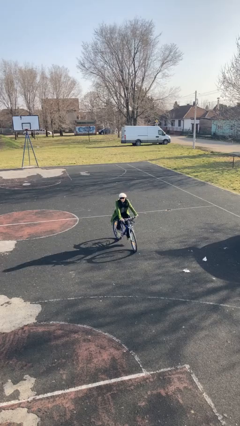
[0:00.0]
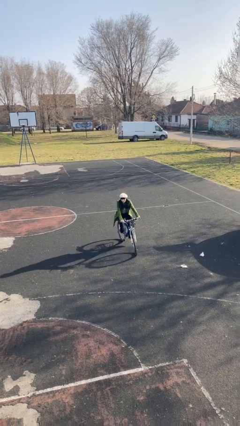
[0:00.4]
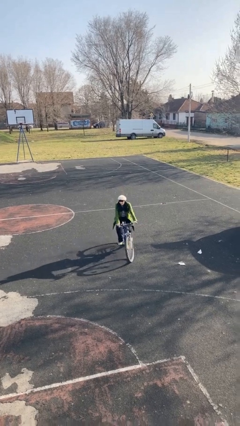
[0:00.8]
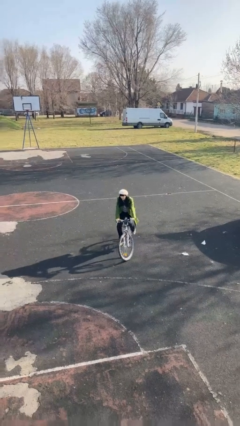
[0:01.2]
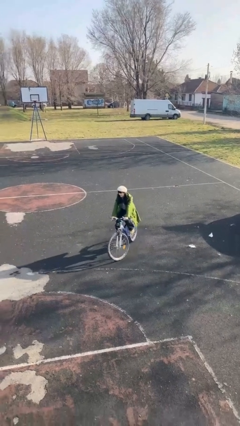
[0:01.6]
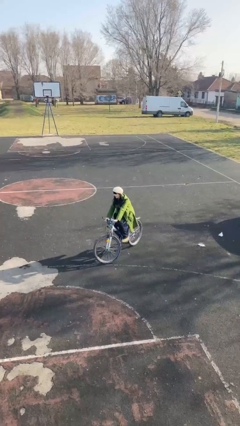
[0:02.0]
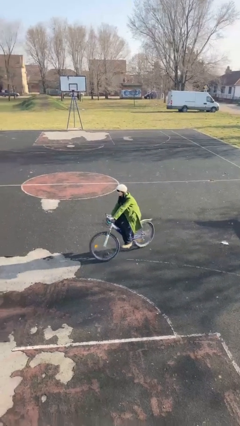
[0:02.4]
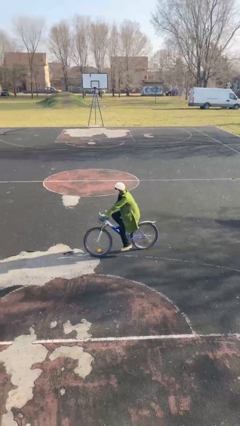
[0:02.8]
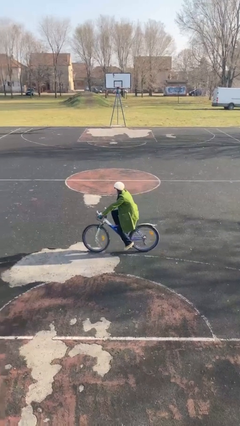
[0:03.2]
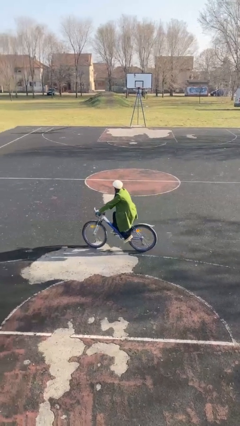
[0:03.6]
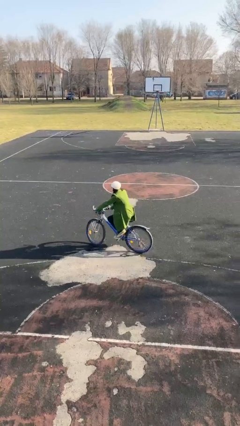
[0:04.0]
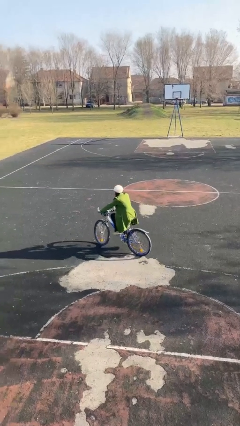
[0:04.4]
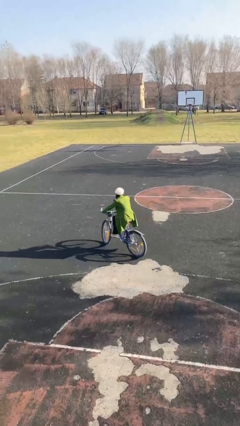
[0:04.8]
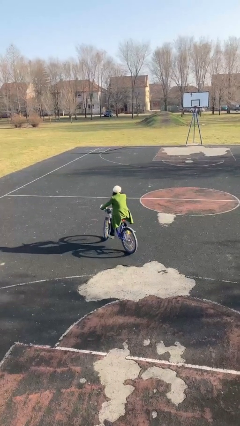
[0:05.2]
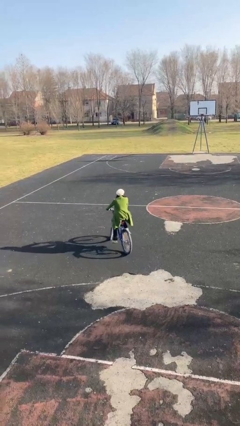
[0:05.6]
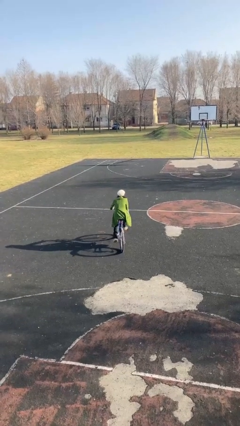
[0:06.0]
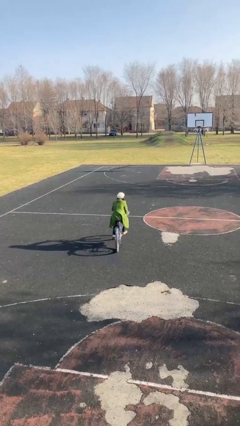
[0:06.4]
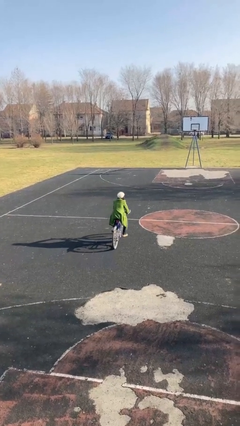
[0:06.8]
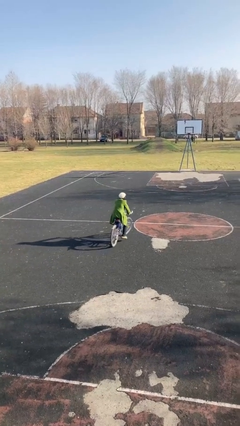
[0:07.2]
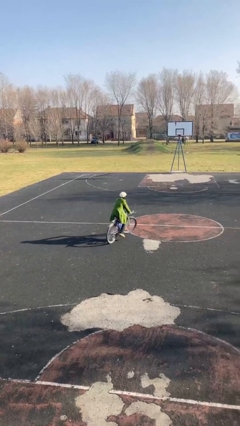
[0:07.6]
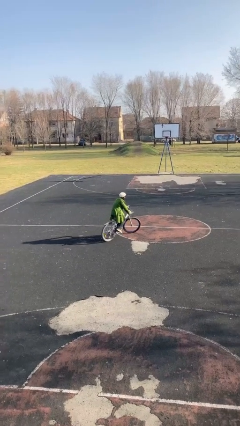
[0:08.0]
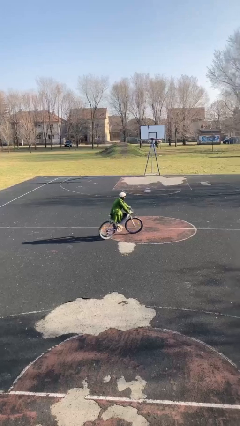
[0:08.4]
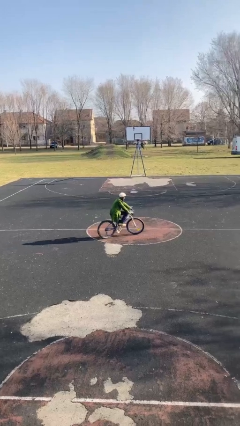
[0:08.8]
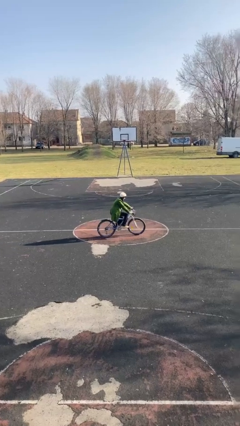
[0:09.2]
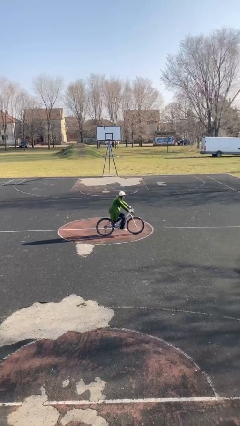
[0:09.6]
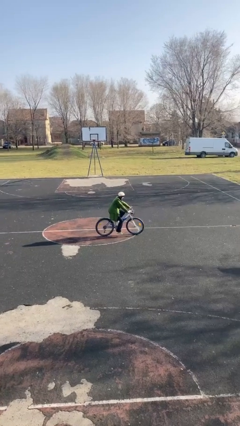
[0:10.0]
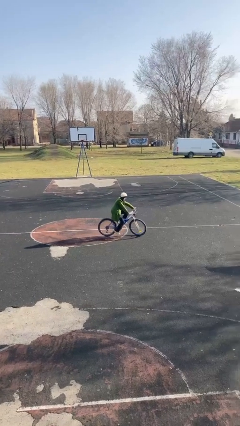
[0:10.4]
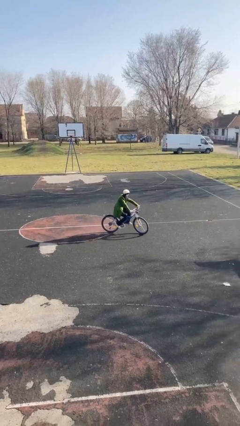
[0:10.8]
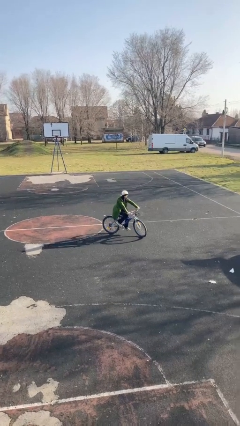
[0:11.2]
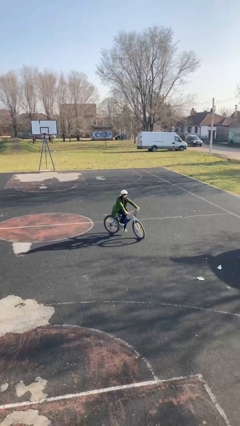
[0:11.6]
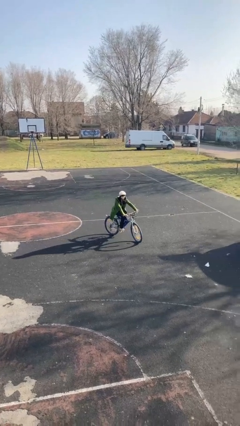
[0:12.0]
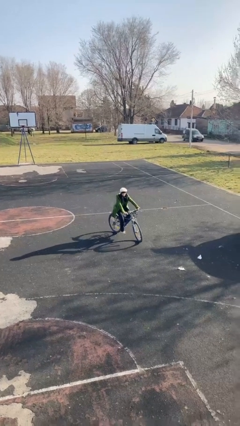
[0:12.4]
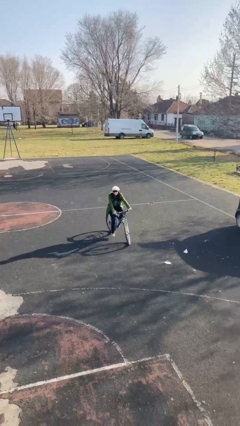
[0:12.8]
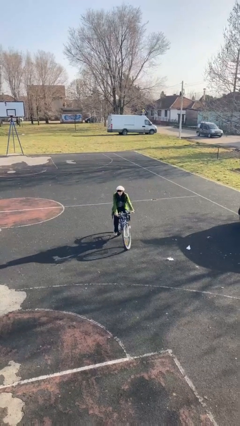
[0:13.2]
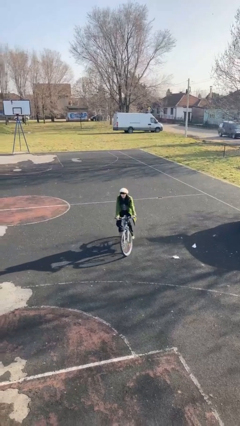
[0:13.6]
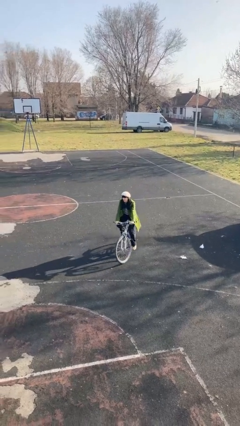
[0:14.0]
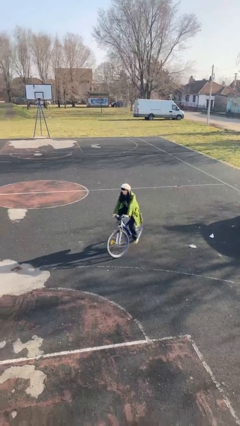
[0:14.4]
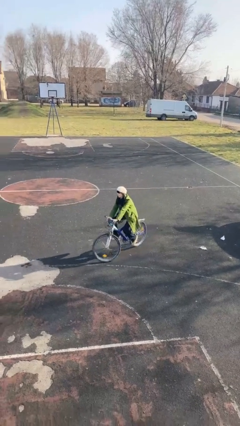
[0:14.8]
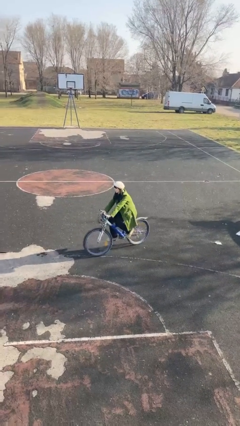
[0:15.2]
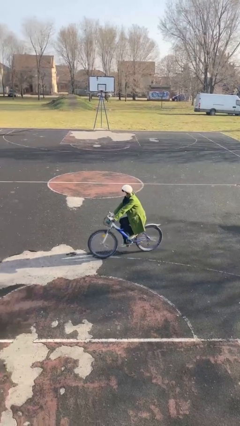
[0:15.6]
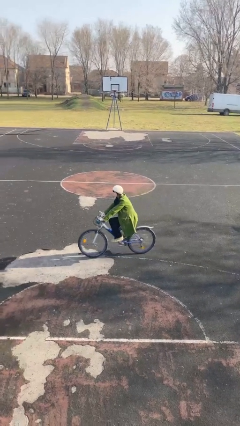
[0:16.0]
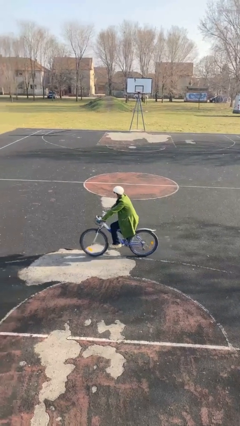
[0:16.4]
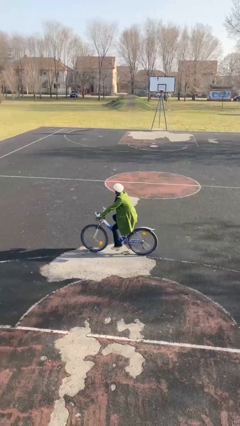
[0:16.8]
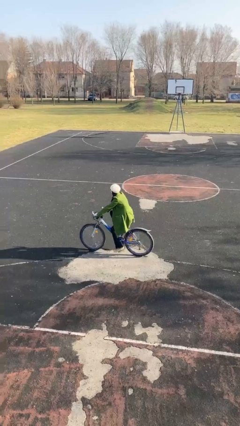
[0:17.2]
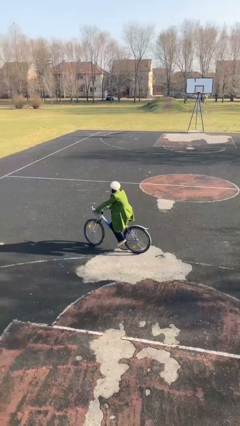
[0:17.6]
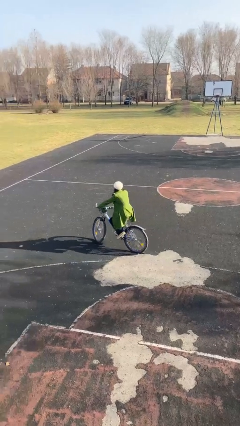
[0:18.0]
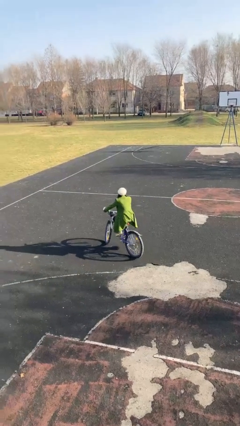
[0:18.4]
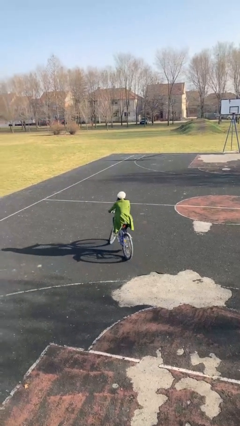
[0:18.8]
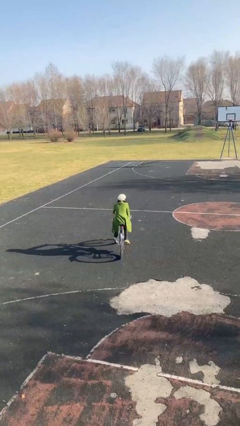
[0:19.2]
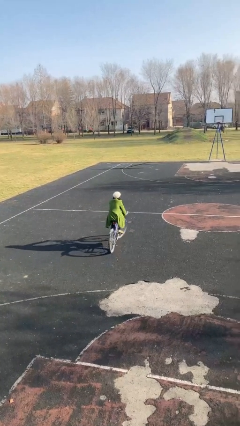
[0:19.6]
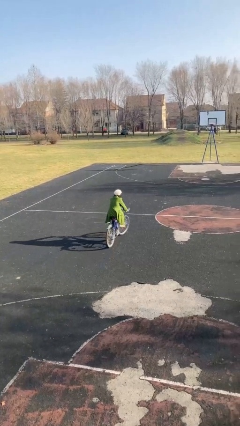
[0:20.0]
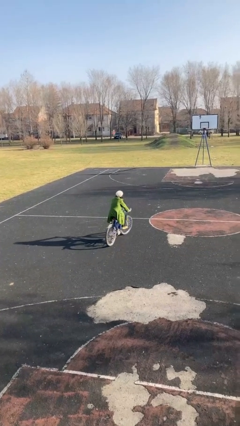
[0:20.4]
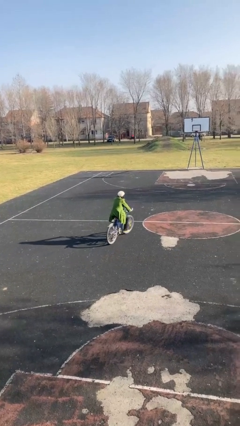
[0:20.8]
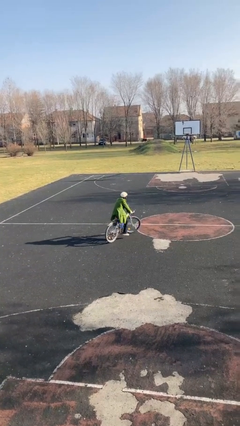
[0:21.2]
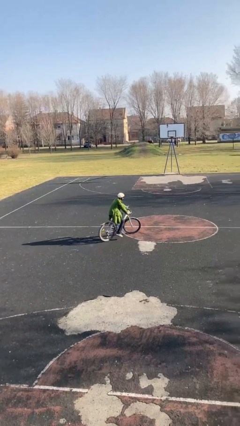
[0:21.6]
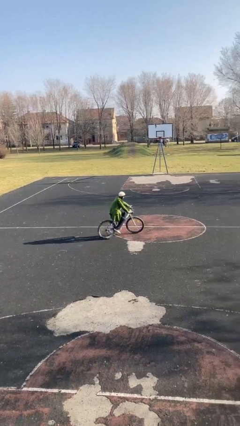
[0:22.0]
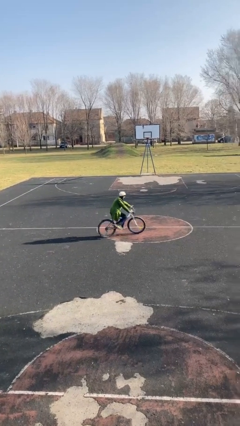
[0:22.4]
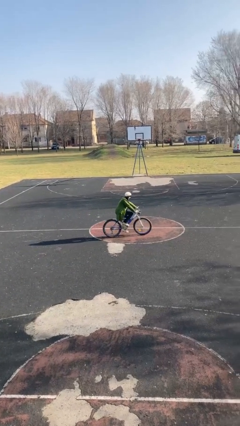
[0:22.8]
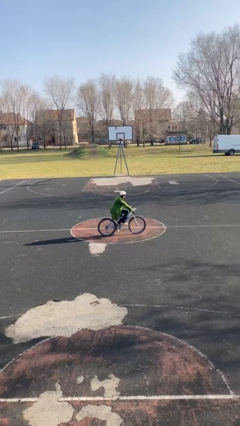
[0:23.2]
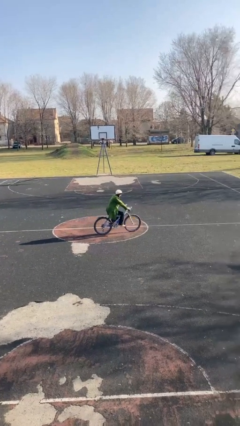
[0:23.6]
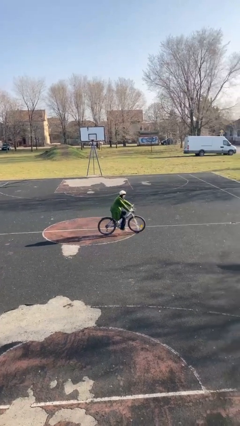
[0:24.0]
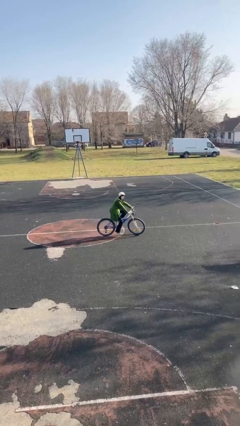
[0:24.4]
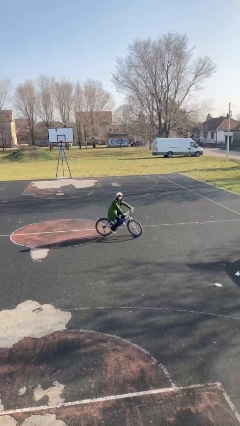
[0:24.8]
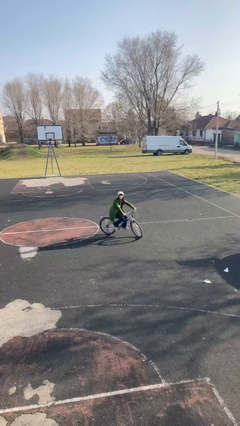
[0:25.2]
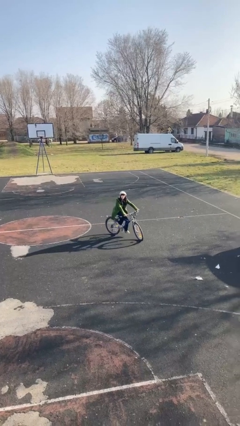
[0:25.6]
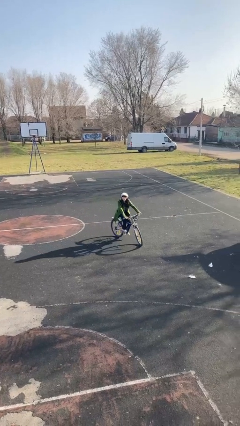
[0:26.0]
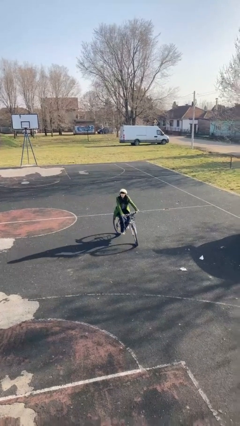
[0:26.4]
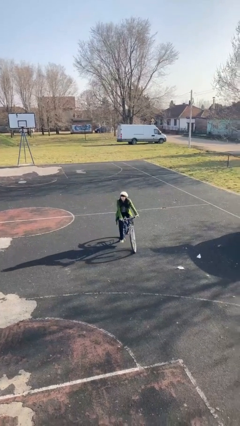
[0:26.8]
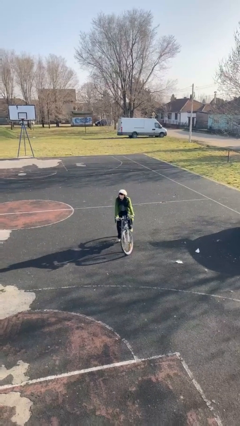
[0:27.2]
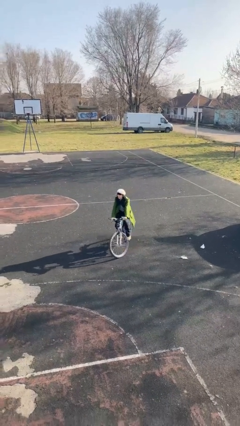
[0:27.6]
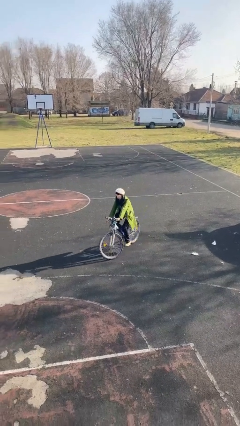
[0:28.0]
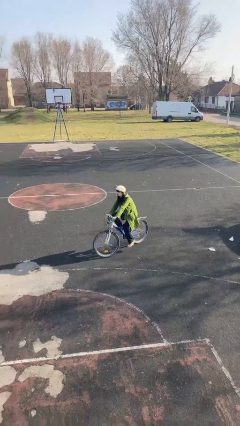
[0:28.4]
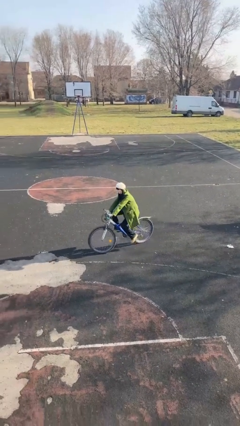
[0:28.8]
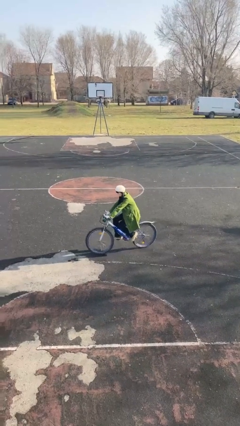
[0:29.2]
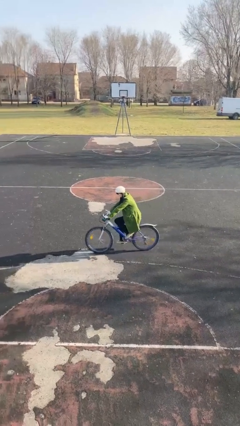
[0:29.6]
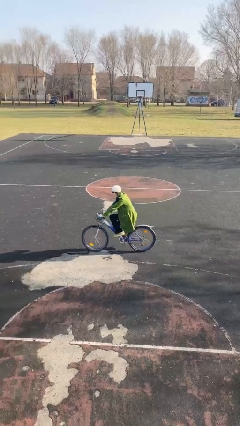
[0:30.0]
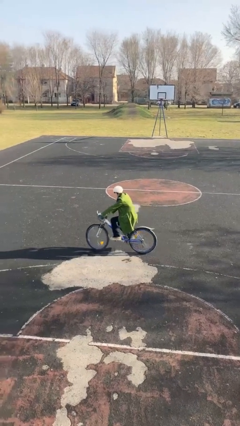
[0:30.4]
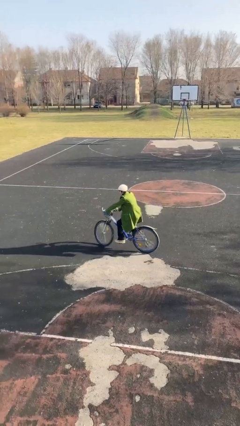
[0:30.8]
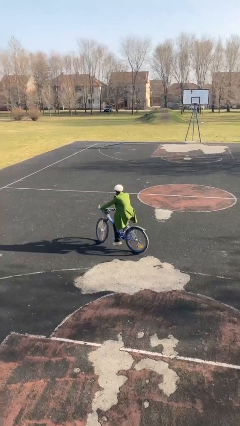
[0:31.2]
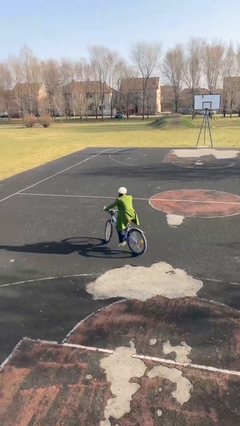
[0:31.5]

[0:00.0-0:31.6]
person rides bicycle

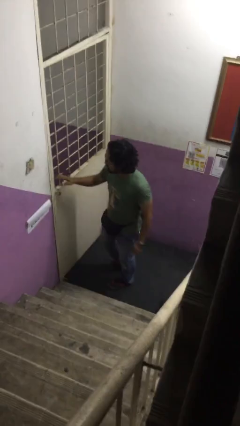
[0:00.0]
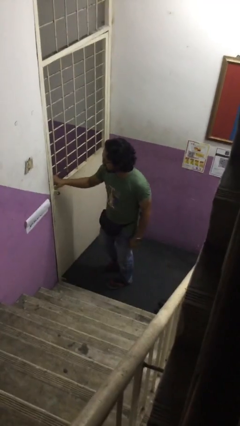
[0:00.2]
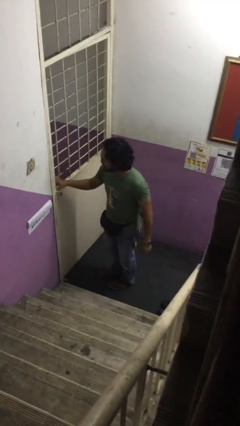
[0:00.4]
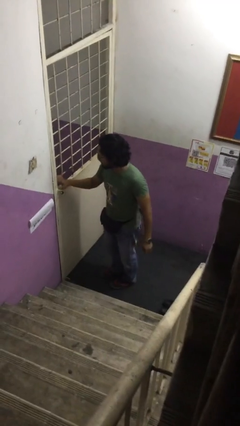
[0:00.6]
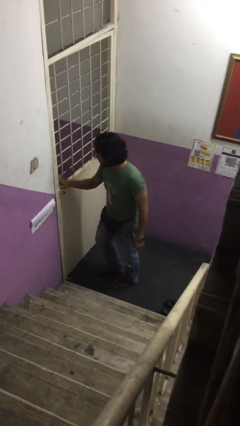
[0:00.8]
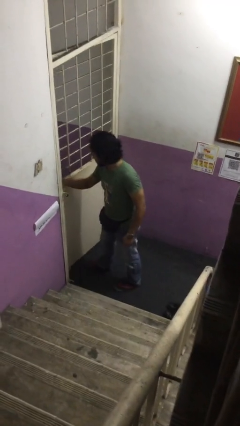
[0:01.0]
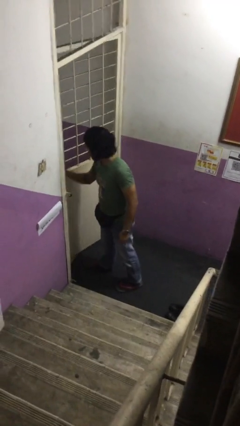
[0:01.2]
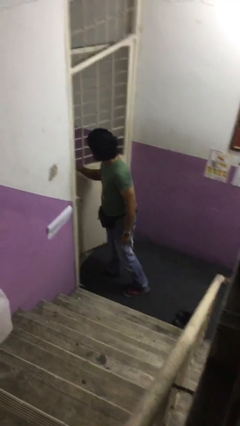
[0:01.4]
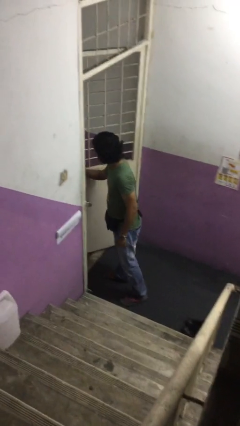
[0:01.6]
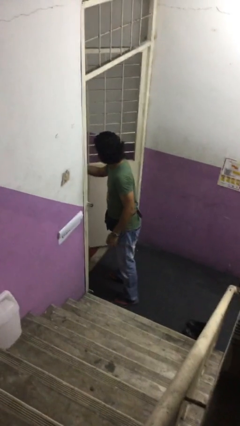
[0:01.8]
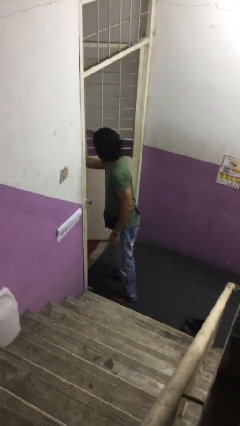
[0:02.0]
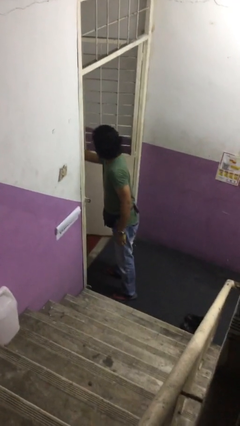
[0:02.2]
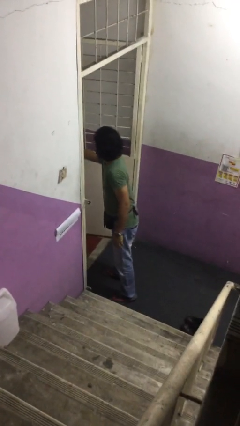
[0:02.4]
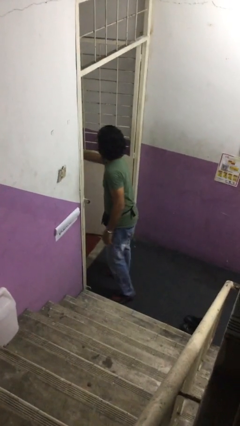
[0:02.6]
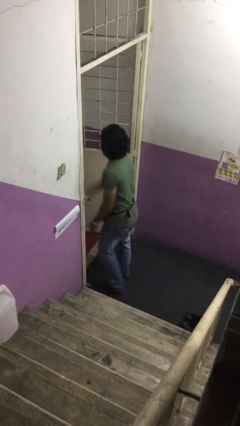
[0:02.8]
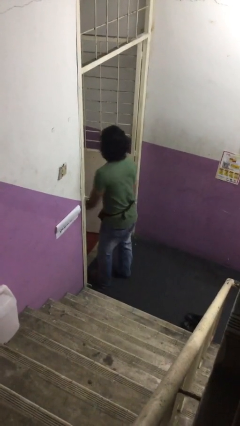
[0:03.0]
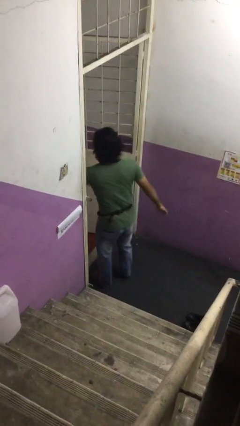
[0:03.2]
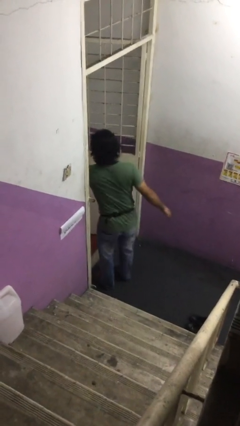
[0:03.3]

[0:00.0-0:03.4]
person opens facility door
